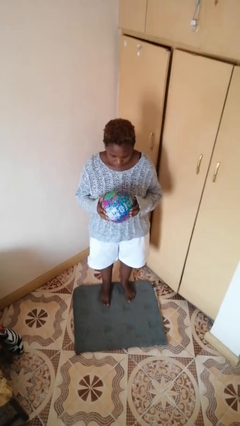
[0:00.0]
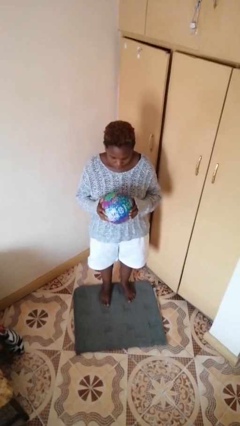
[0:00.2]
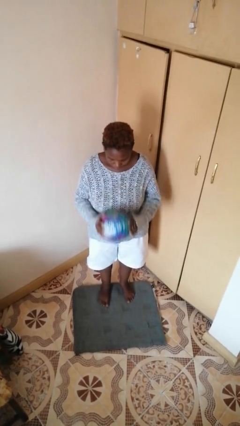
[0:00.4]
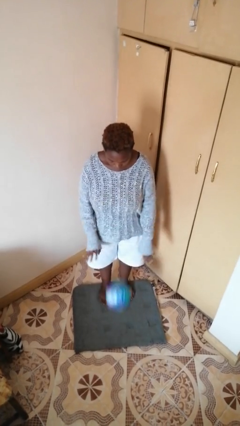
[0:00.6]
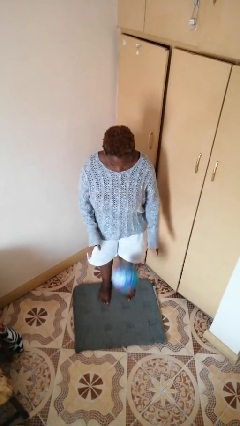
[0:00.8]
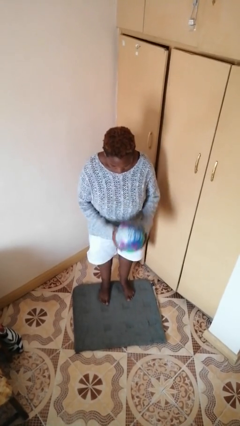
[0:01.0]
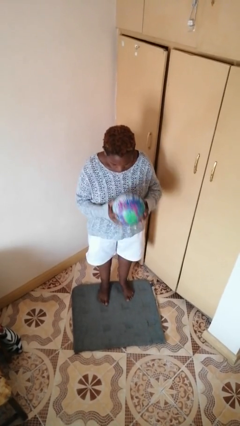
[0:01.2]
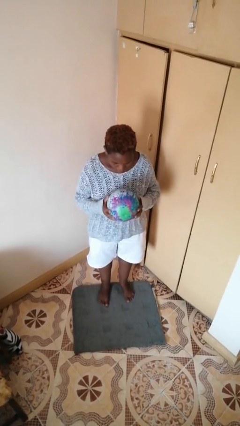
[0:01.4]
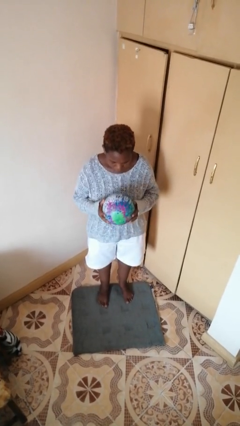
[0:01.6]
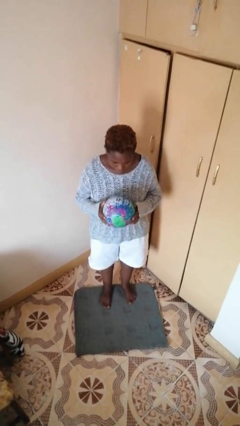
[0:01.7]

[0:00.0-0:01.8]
person bounces ball on floor

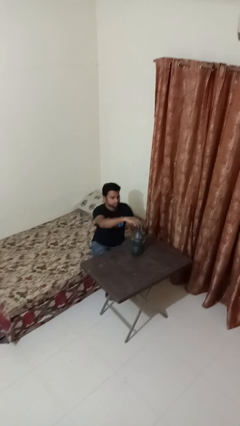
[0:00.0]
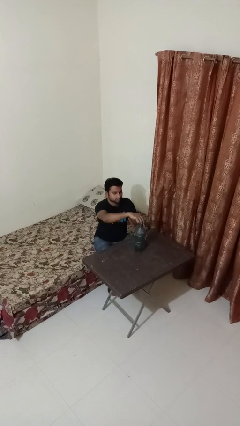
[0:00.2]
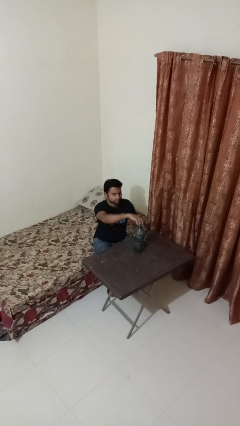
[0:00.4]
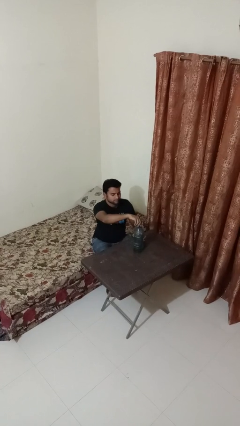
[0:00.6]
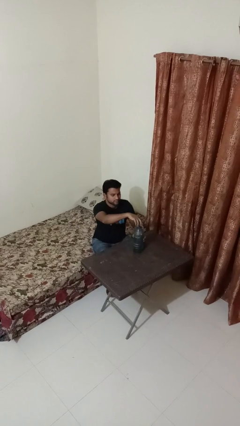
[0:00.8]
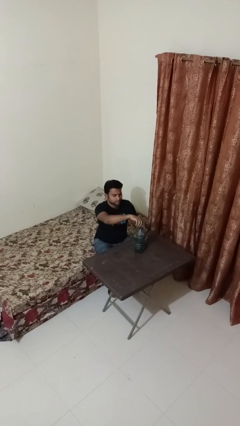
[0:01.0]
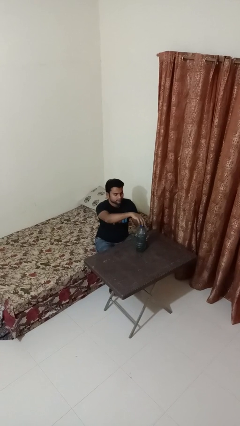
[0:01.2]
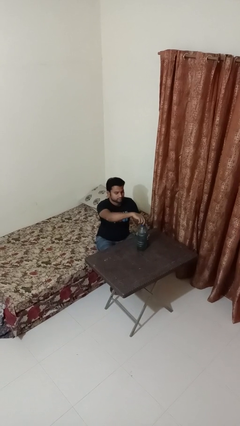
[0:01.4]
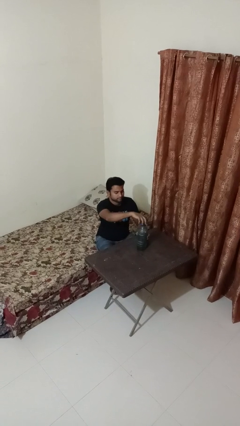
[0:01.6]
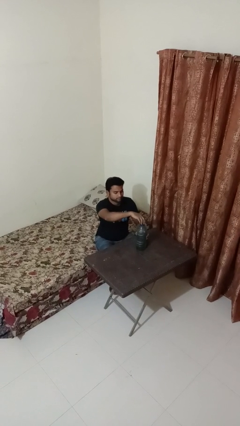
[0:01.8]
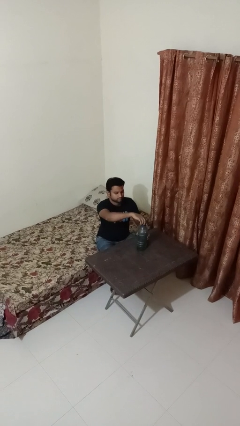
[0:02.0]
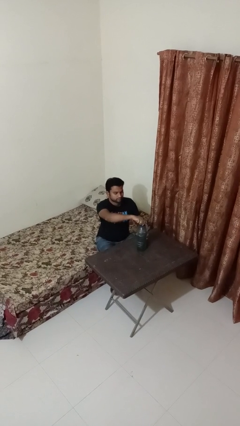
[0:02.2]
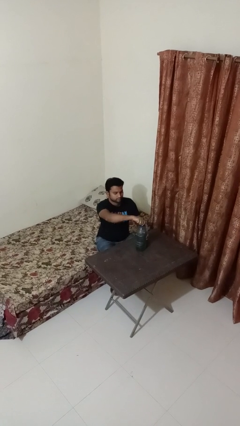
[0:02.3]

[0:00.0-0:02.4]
person screws lid to bottle

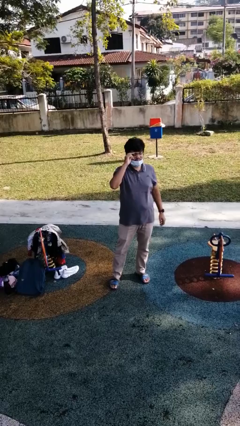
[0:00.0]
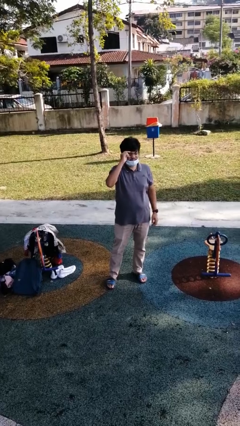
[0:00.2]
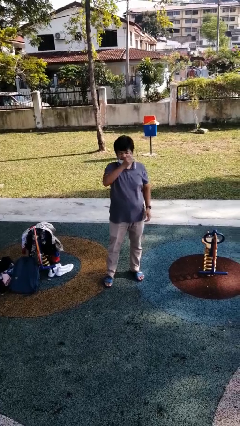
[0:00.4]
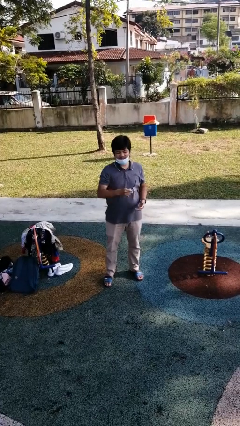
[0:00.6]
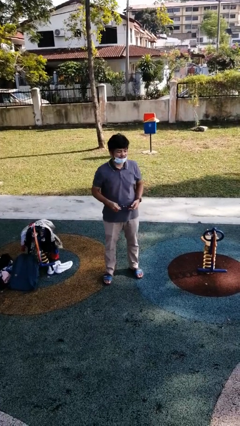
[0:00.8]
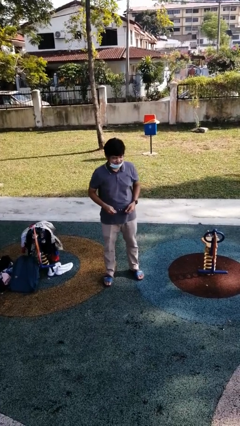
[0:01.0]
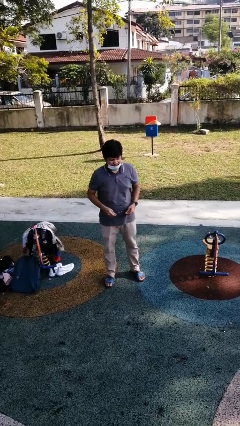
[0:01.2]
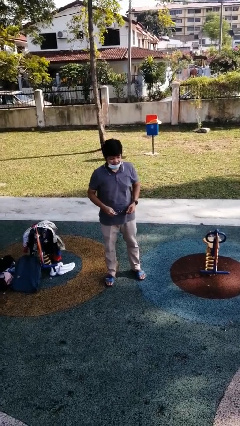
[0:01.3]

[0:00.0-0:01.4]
person takes off glasses

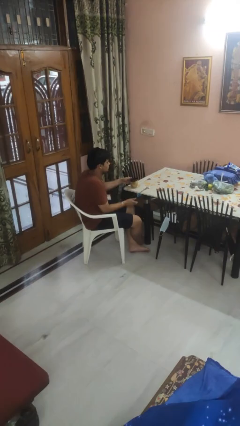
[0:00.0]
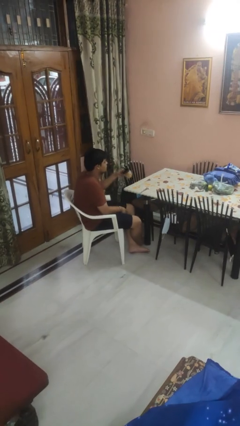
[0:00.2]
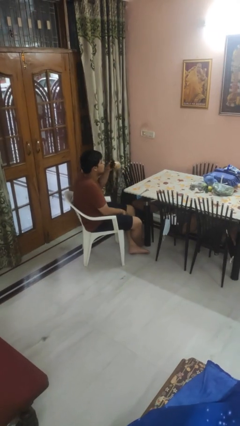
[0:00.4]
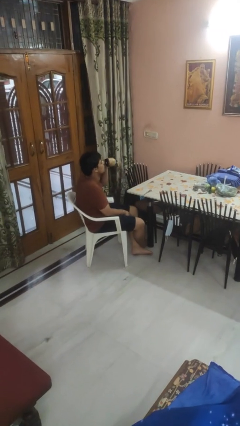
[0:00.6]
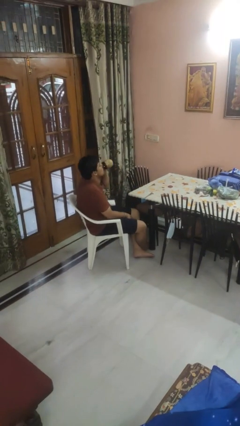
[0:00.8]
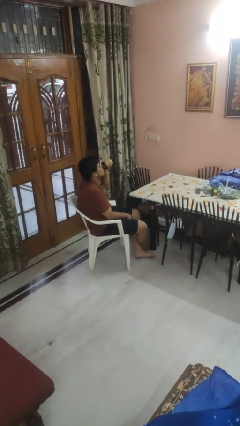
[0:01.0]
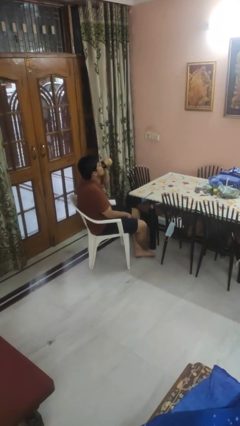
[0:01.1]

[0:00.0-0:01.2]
person drinks from mug

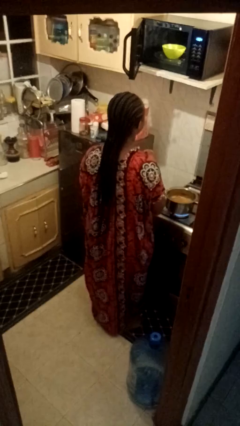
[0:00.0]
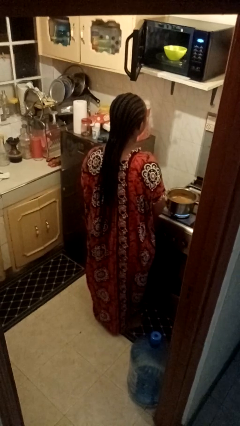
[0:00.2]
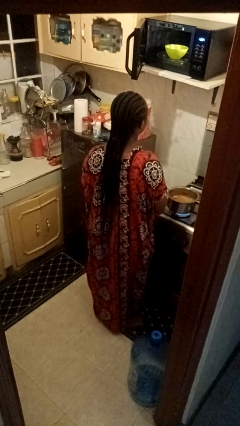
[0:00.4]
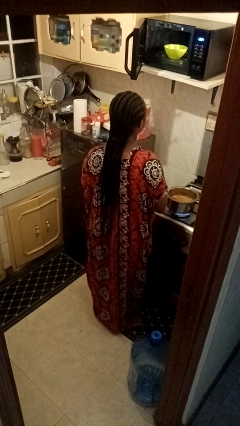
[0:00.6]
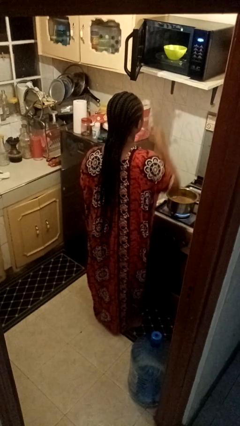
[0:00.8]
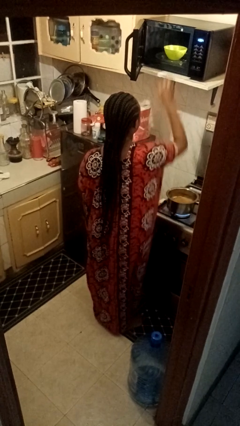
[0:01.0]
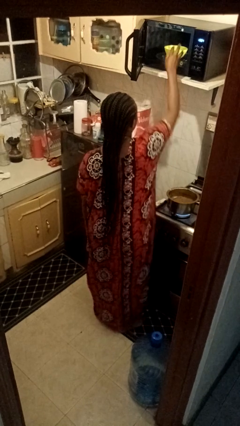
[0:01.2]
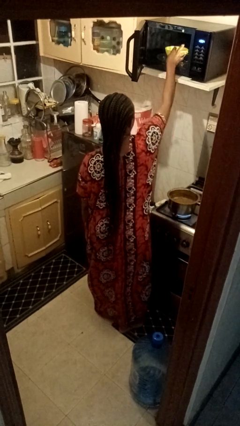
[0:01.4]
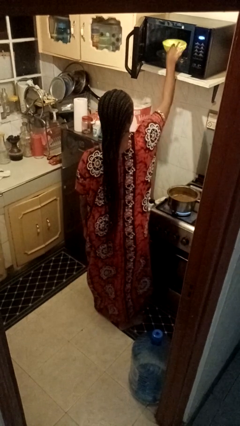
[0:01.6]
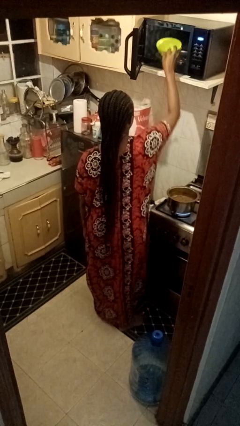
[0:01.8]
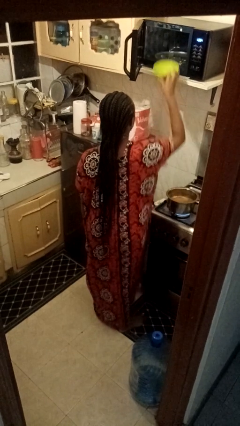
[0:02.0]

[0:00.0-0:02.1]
person takes object from microwave

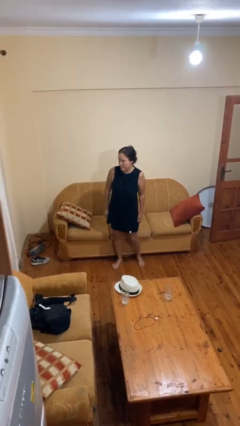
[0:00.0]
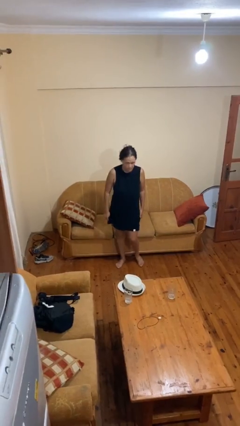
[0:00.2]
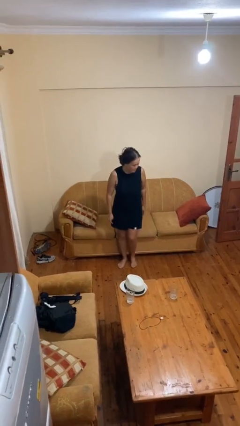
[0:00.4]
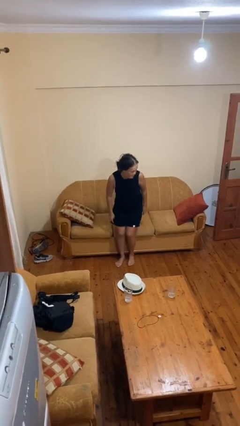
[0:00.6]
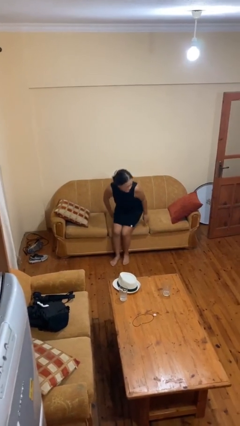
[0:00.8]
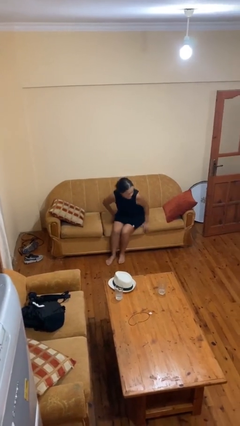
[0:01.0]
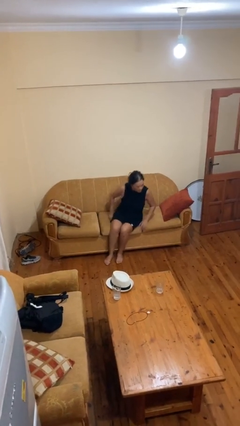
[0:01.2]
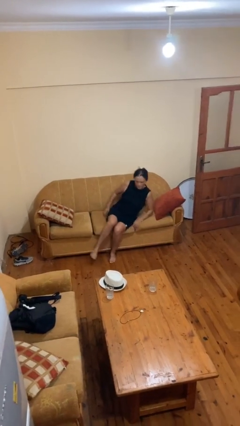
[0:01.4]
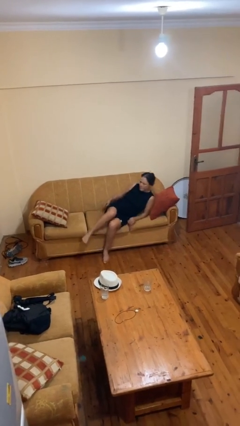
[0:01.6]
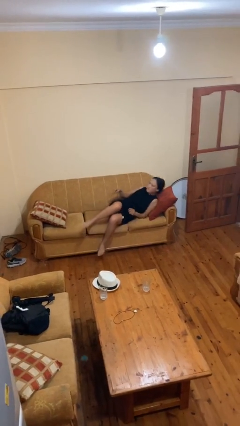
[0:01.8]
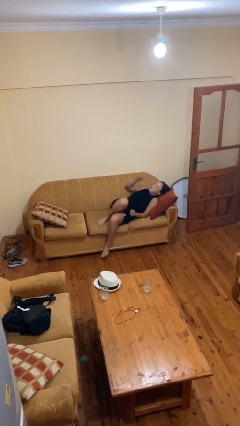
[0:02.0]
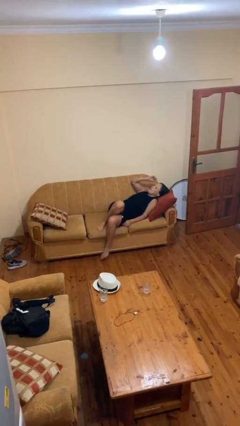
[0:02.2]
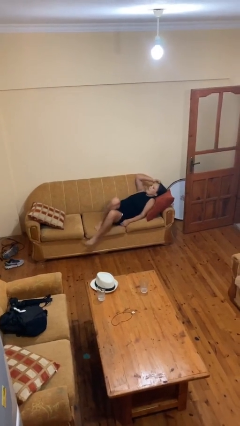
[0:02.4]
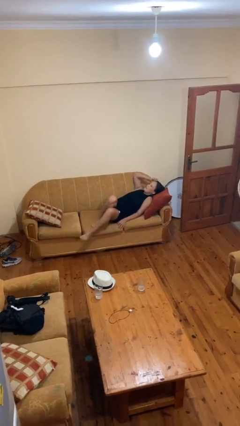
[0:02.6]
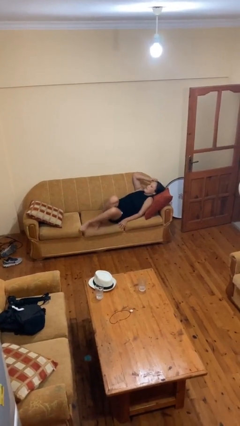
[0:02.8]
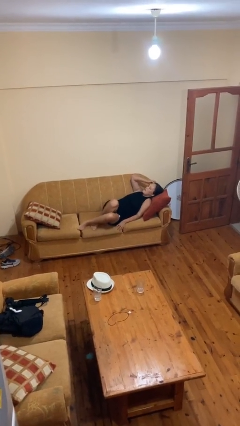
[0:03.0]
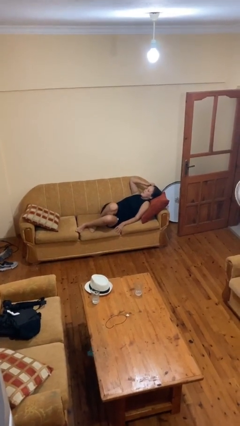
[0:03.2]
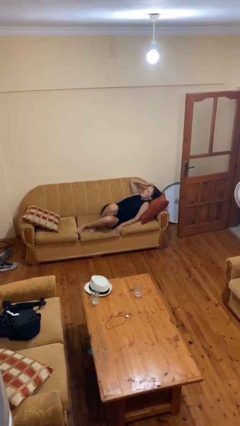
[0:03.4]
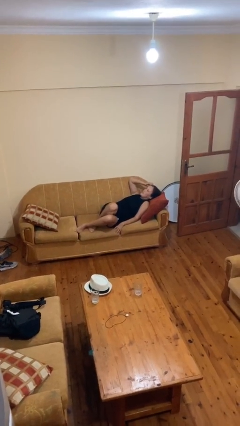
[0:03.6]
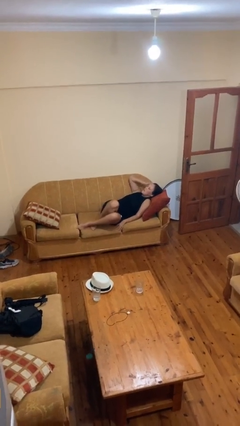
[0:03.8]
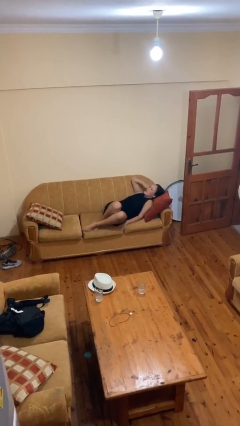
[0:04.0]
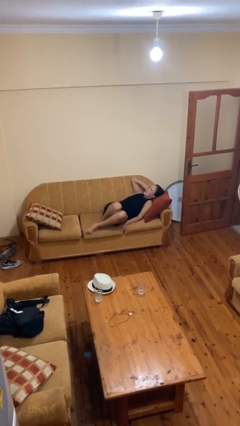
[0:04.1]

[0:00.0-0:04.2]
person lies down on couch

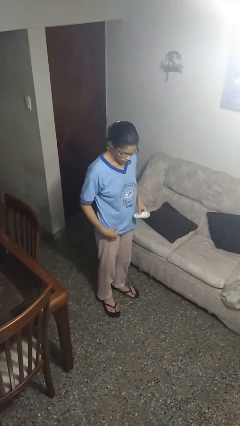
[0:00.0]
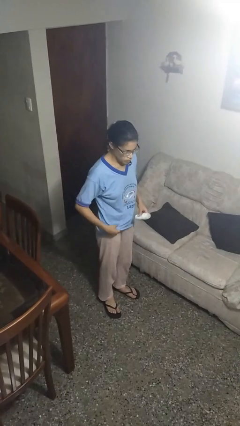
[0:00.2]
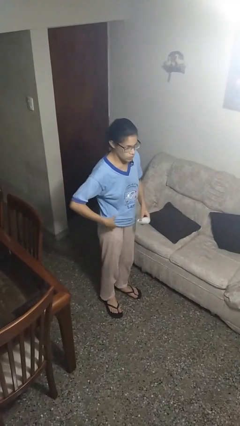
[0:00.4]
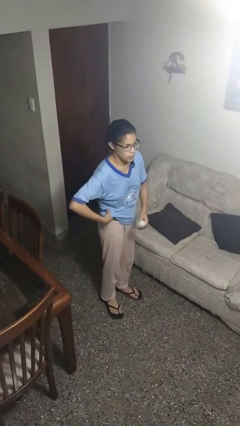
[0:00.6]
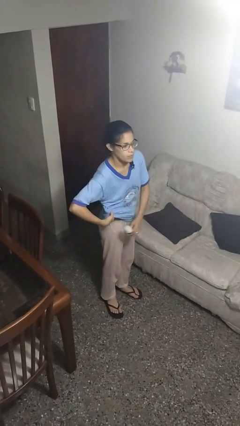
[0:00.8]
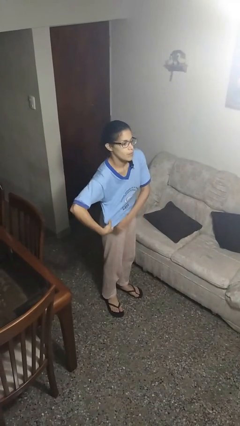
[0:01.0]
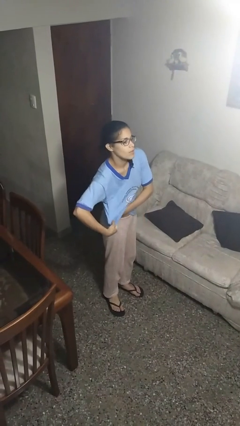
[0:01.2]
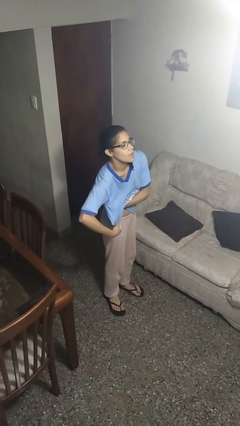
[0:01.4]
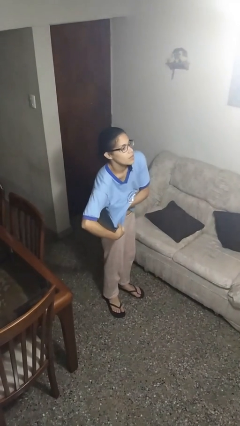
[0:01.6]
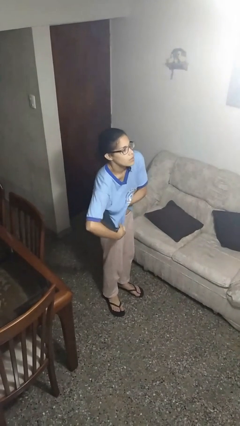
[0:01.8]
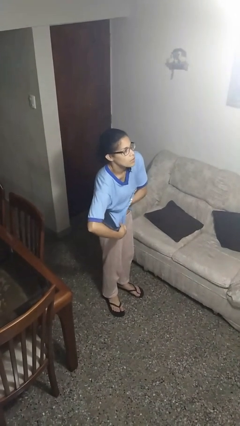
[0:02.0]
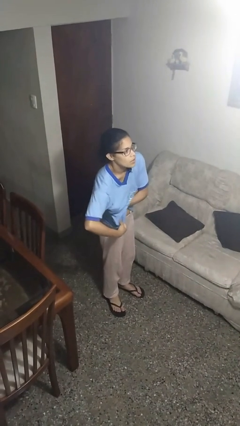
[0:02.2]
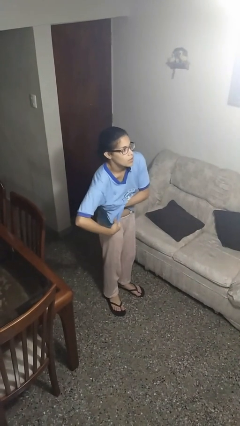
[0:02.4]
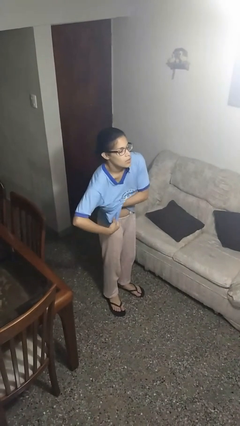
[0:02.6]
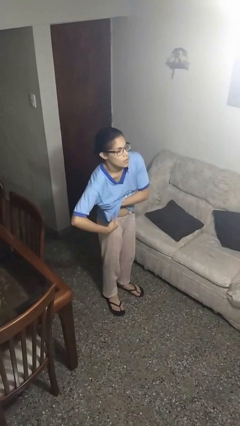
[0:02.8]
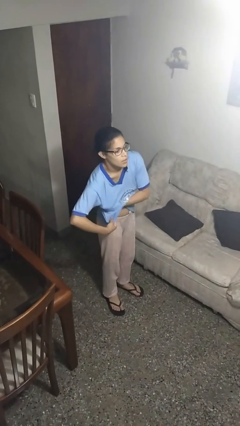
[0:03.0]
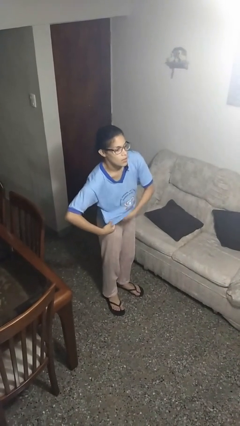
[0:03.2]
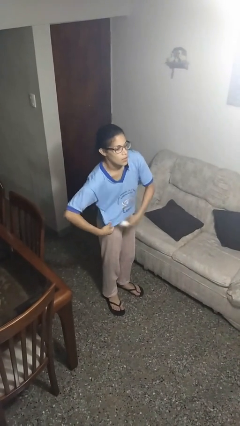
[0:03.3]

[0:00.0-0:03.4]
person applies deodorant

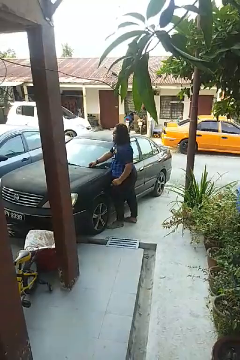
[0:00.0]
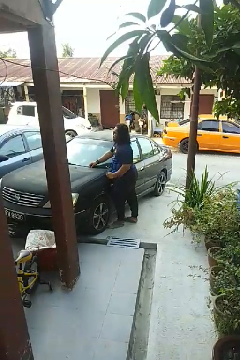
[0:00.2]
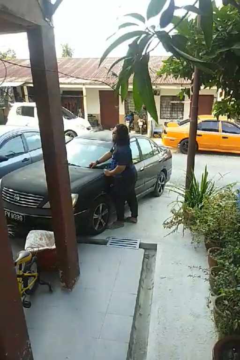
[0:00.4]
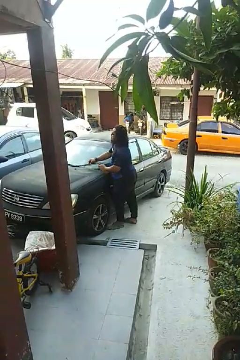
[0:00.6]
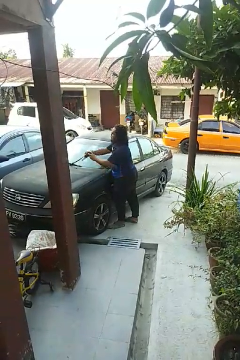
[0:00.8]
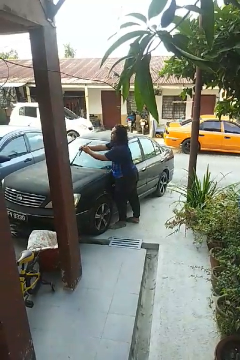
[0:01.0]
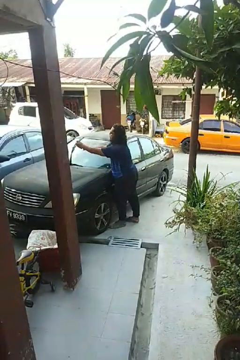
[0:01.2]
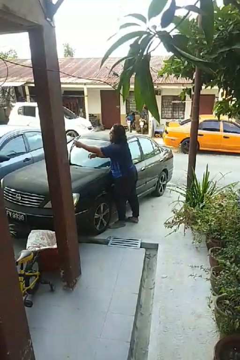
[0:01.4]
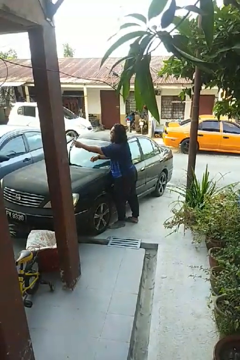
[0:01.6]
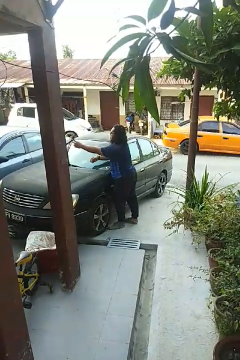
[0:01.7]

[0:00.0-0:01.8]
person flips up car wipers
